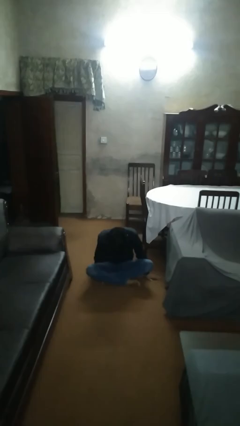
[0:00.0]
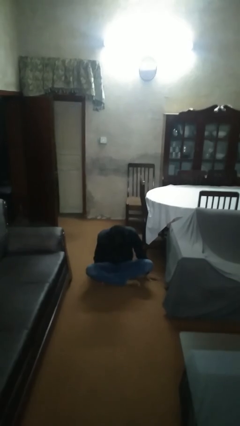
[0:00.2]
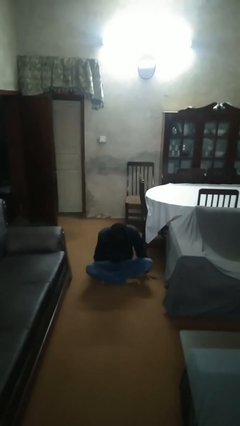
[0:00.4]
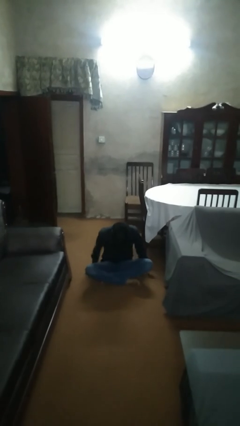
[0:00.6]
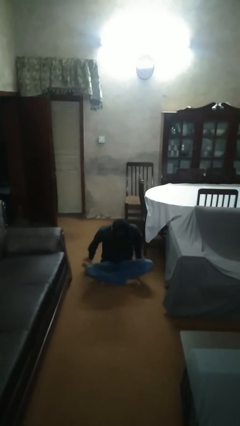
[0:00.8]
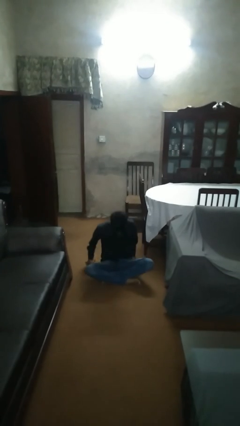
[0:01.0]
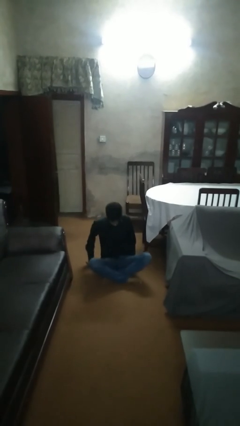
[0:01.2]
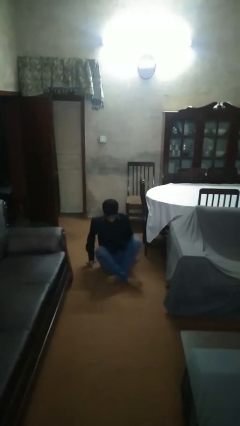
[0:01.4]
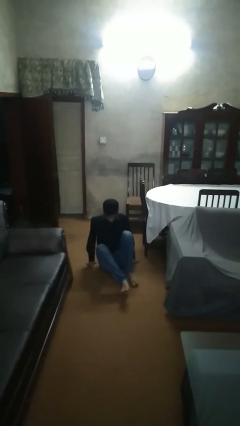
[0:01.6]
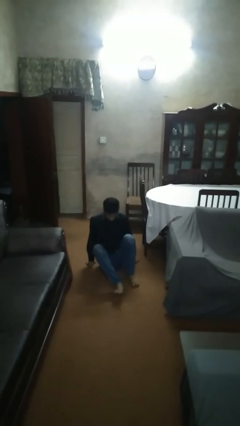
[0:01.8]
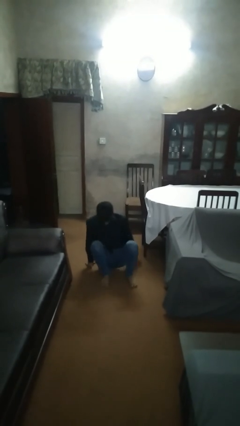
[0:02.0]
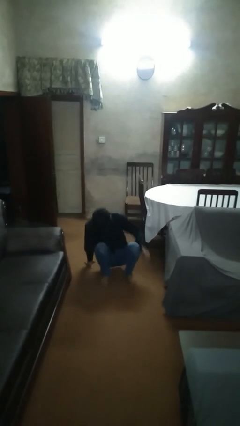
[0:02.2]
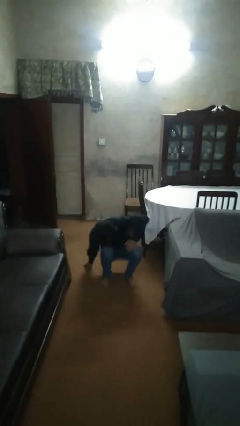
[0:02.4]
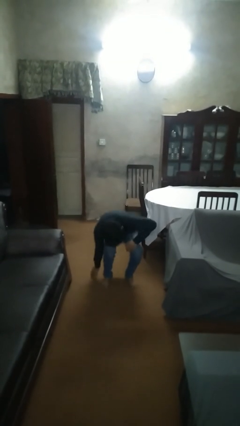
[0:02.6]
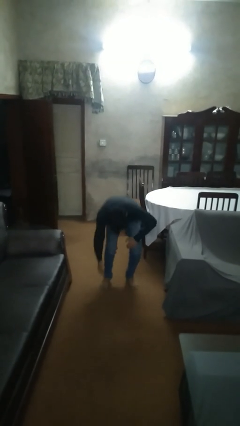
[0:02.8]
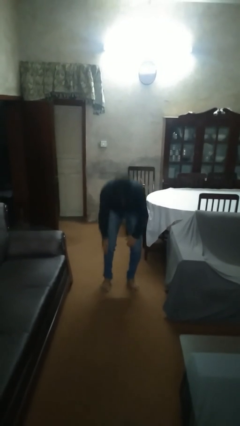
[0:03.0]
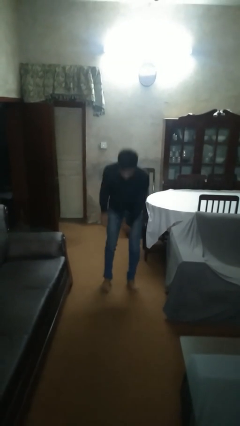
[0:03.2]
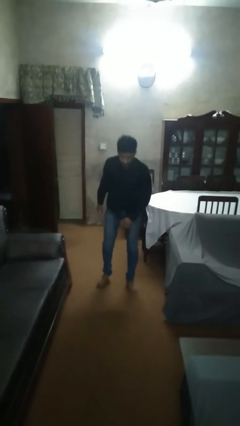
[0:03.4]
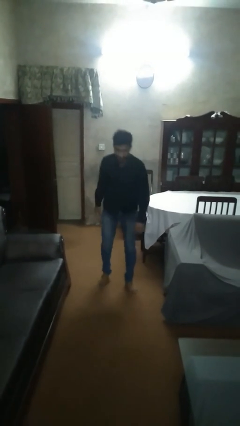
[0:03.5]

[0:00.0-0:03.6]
person stands up from floor

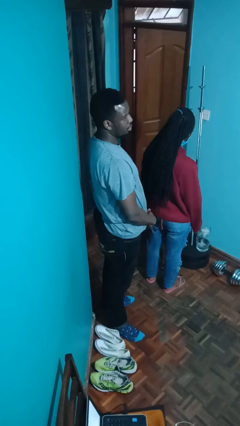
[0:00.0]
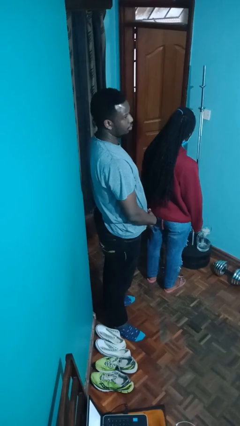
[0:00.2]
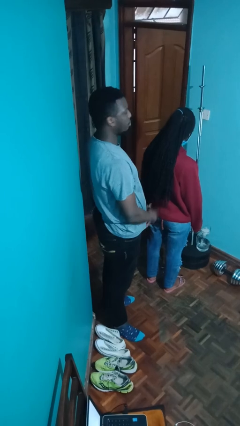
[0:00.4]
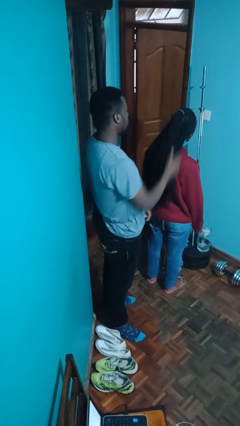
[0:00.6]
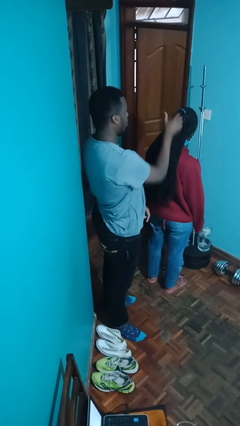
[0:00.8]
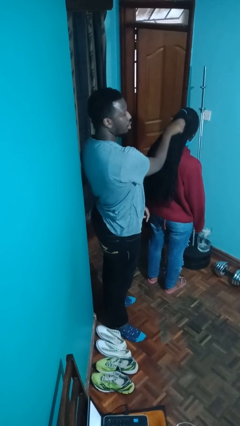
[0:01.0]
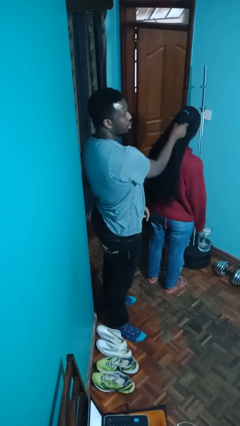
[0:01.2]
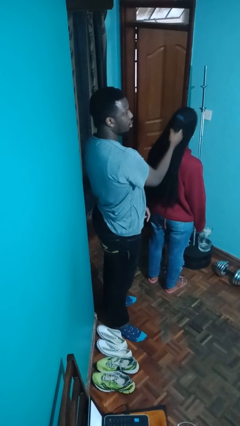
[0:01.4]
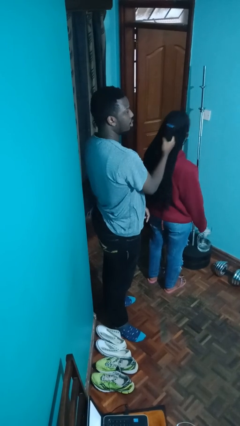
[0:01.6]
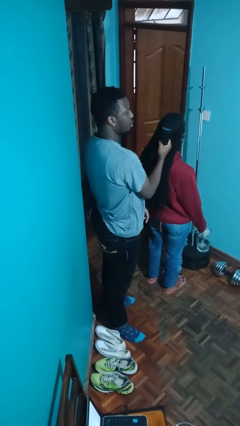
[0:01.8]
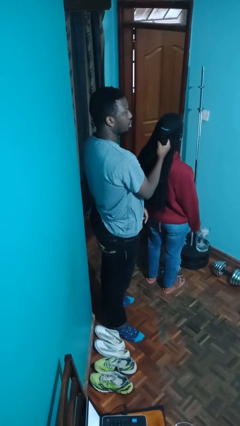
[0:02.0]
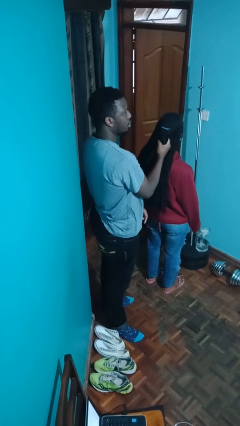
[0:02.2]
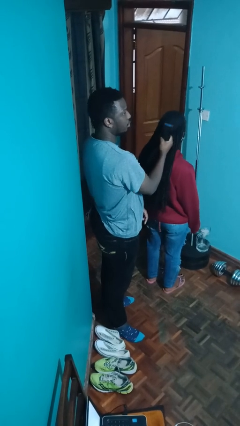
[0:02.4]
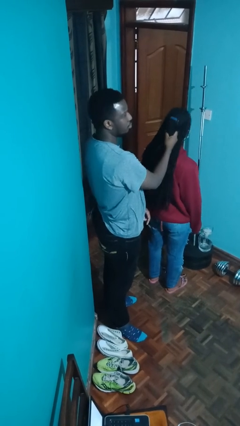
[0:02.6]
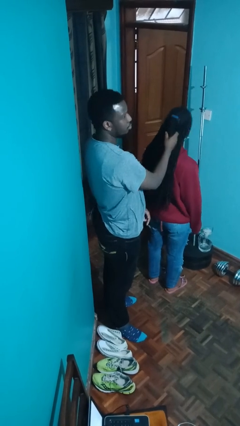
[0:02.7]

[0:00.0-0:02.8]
person grabs person by hair

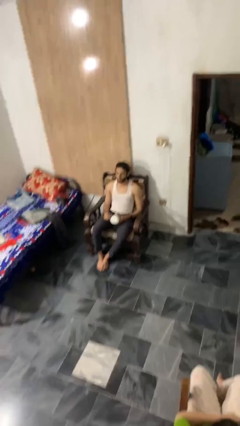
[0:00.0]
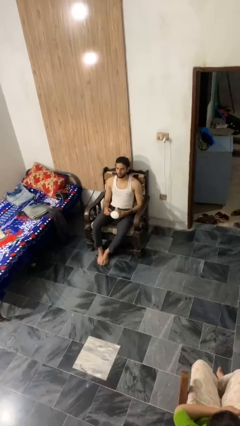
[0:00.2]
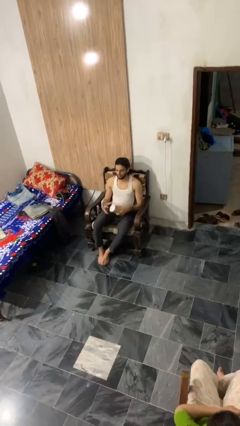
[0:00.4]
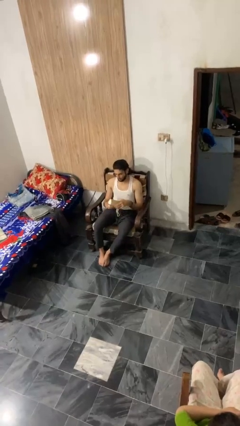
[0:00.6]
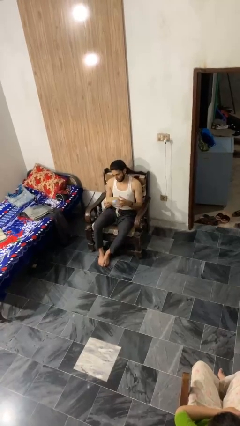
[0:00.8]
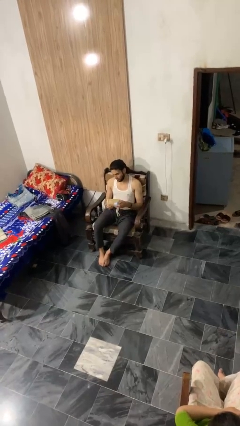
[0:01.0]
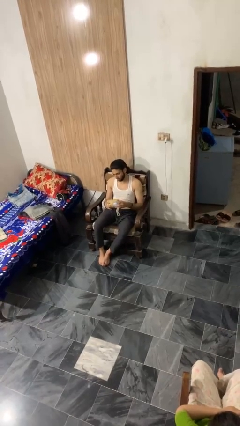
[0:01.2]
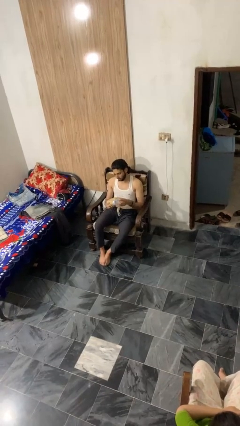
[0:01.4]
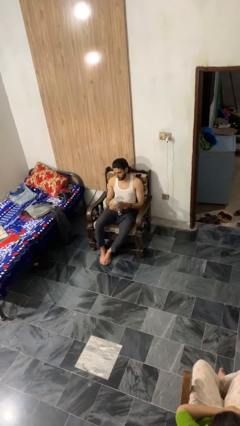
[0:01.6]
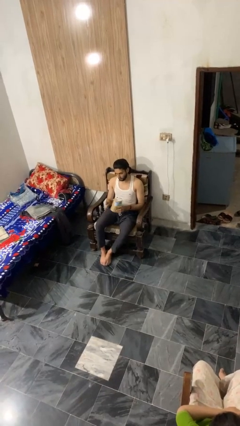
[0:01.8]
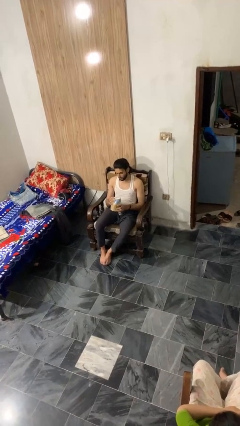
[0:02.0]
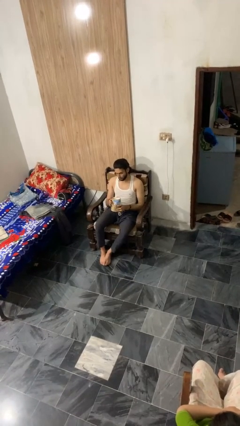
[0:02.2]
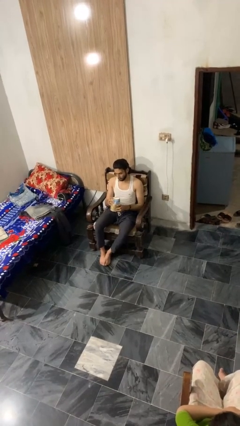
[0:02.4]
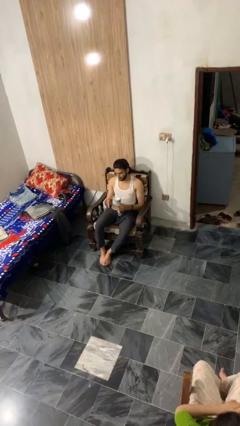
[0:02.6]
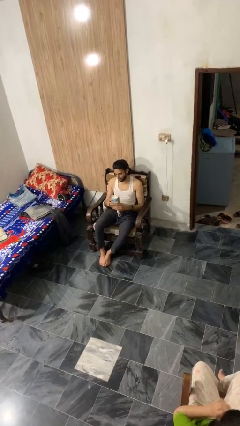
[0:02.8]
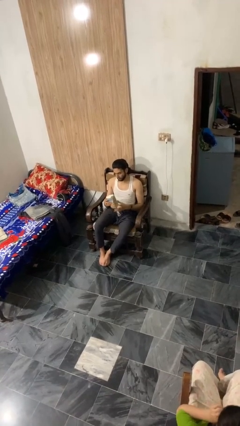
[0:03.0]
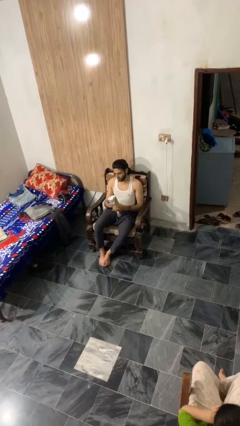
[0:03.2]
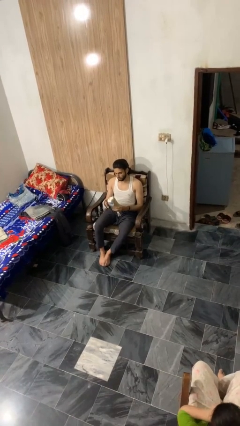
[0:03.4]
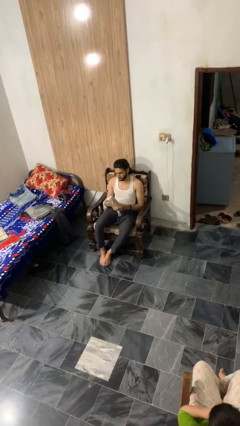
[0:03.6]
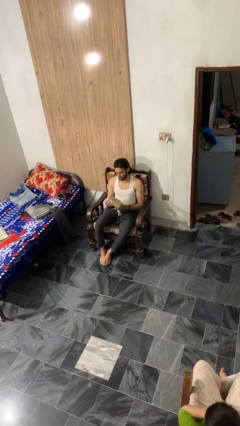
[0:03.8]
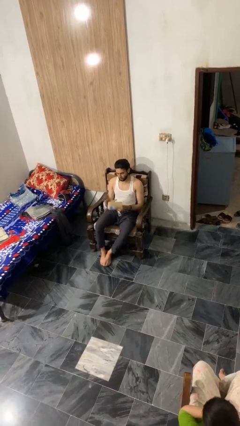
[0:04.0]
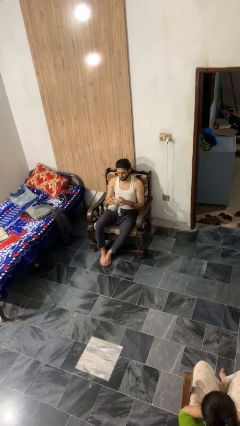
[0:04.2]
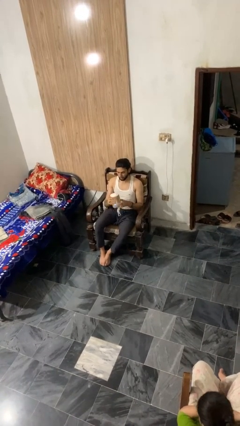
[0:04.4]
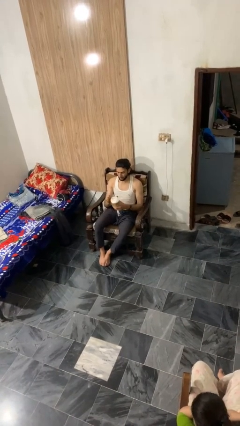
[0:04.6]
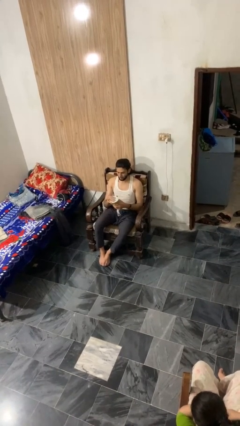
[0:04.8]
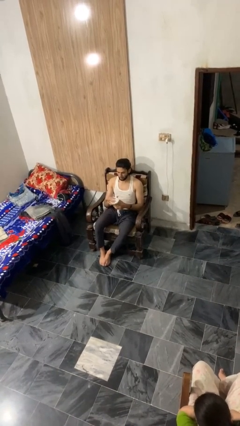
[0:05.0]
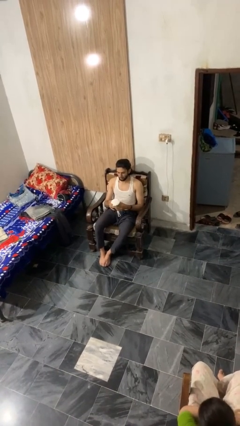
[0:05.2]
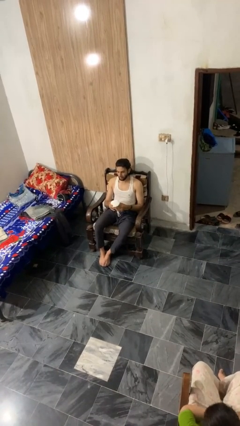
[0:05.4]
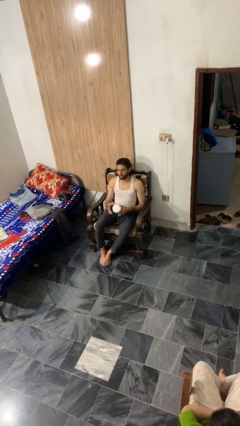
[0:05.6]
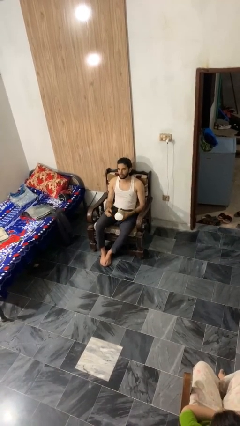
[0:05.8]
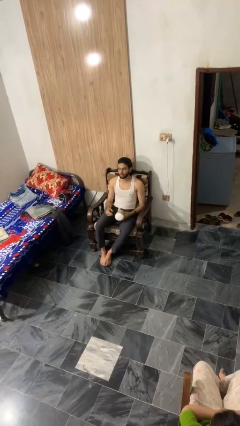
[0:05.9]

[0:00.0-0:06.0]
person squeezes object

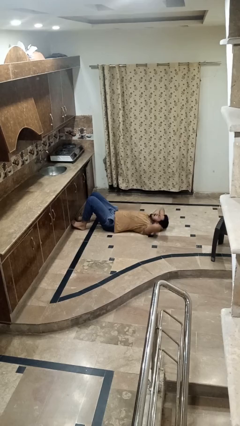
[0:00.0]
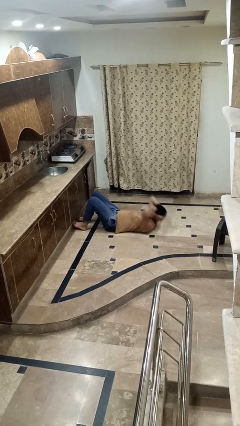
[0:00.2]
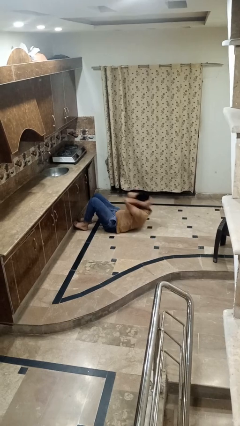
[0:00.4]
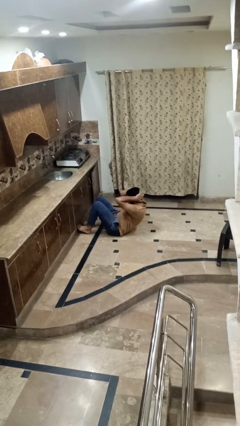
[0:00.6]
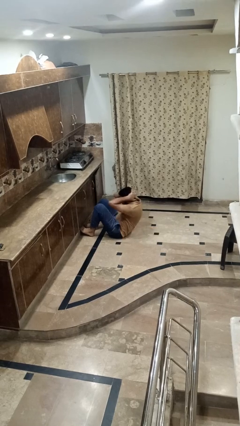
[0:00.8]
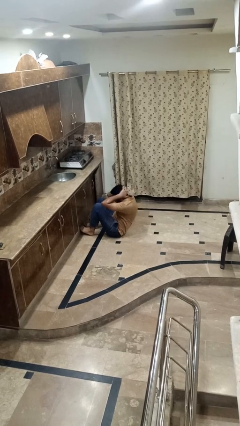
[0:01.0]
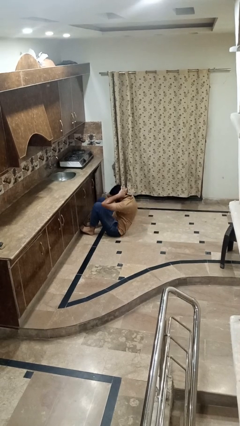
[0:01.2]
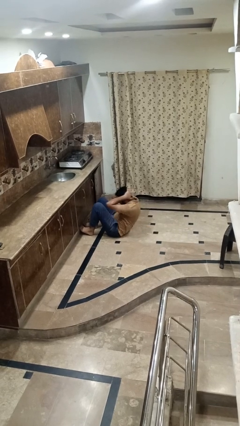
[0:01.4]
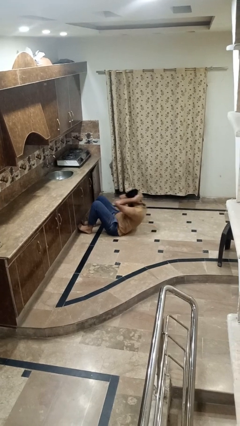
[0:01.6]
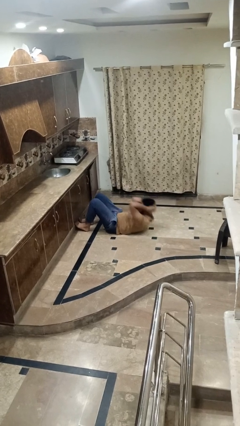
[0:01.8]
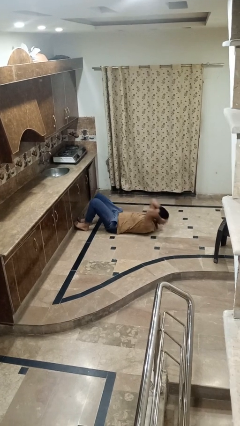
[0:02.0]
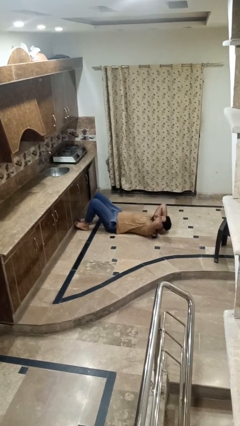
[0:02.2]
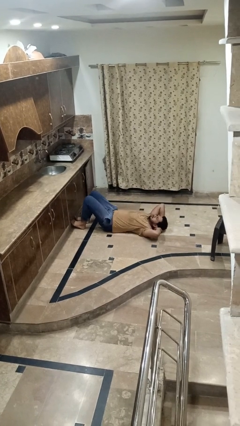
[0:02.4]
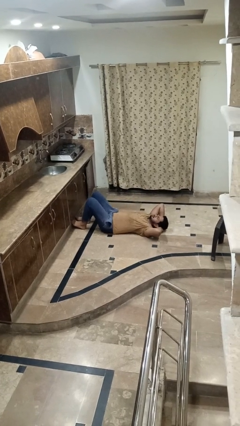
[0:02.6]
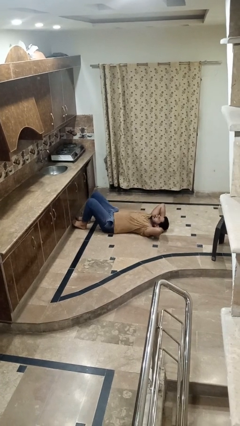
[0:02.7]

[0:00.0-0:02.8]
person exercises with situp

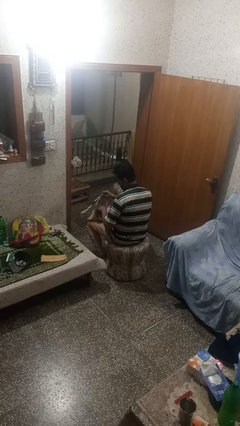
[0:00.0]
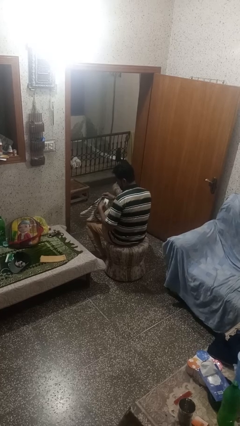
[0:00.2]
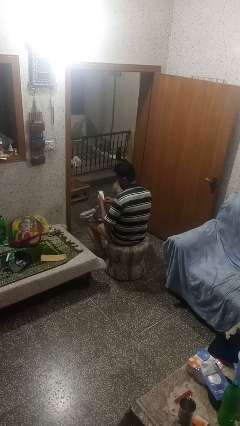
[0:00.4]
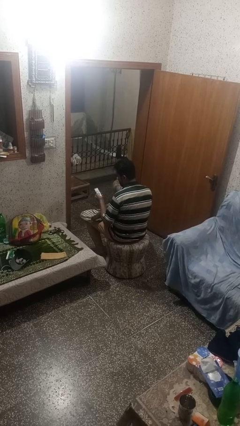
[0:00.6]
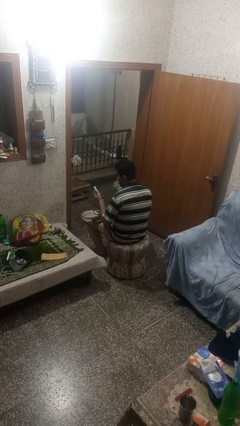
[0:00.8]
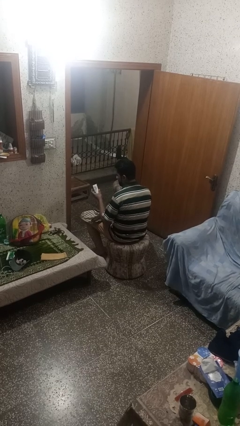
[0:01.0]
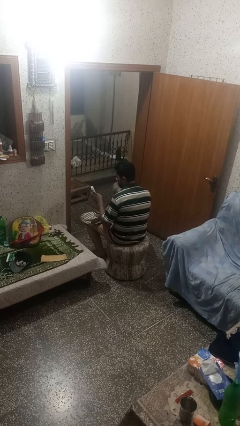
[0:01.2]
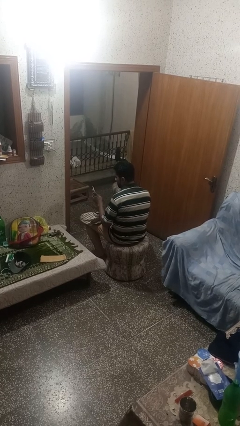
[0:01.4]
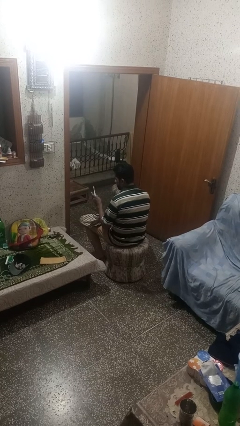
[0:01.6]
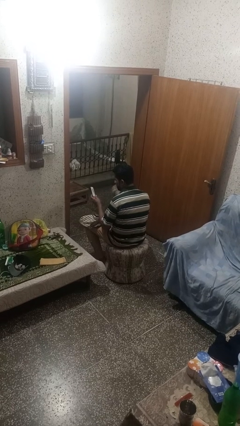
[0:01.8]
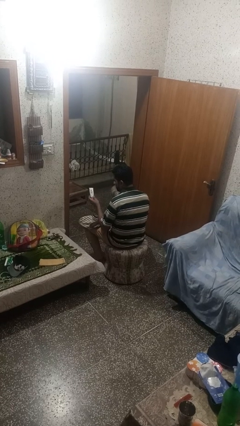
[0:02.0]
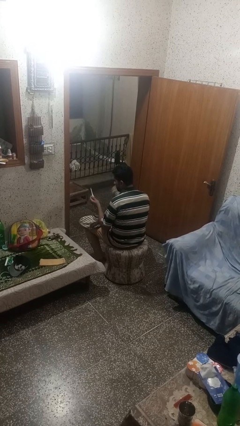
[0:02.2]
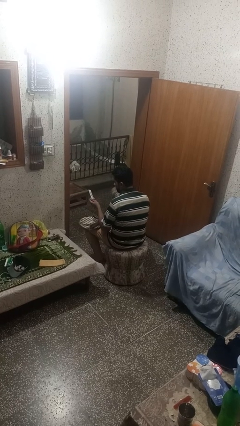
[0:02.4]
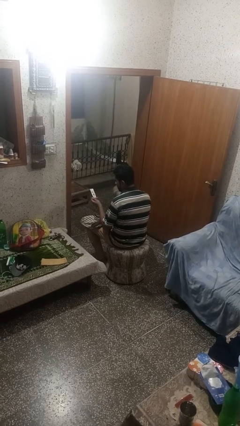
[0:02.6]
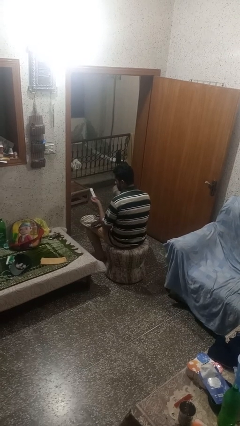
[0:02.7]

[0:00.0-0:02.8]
person takes object from purse
